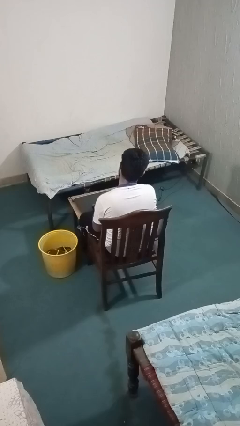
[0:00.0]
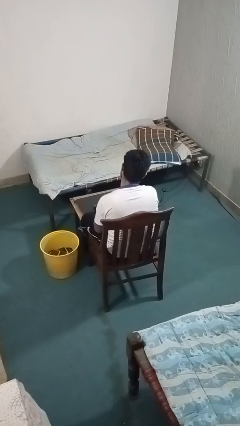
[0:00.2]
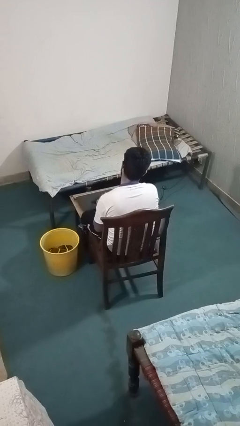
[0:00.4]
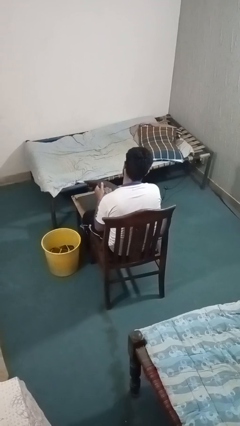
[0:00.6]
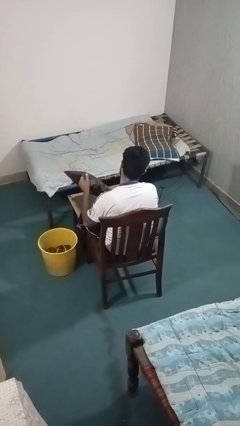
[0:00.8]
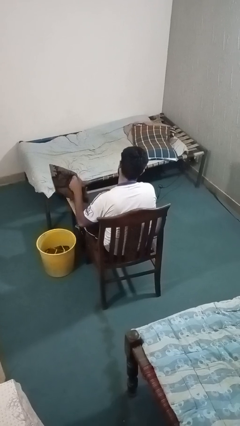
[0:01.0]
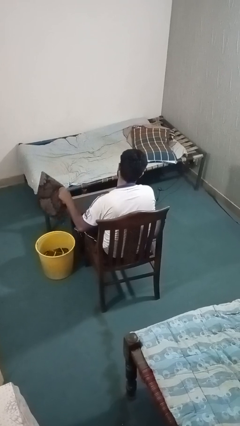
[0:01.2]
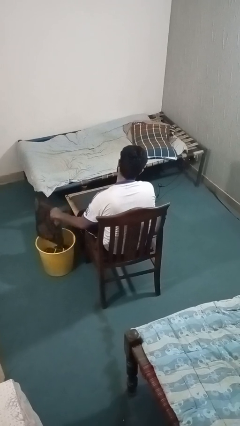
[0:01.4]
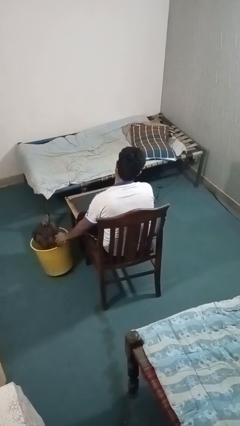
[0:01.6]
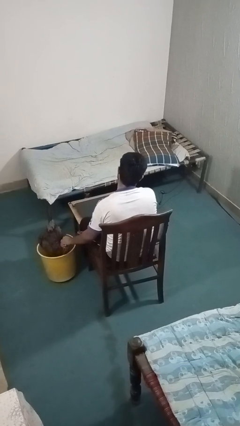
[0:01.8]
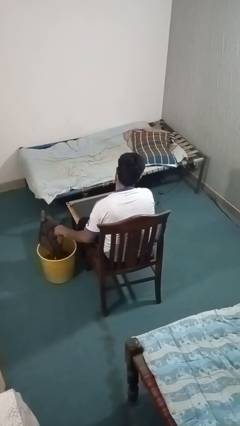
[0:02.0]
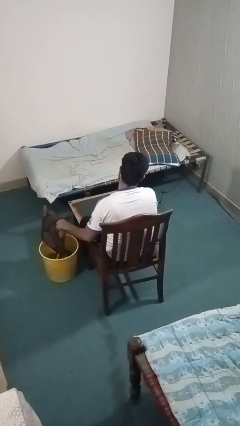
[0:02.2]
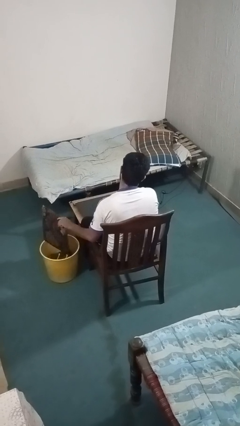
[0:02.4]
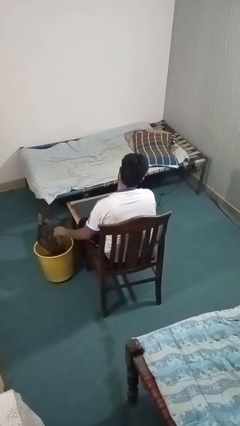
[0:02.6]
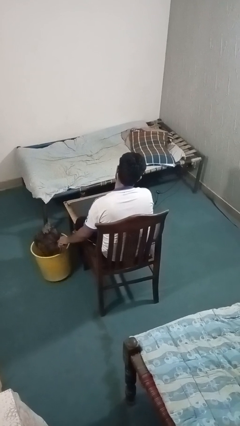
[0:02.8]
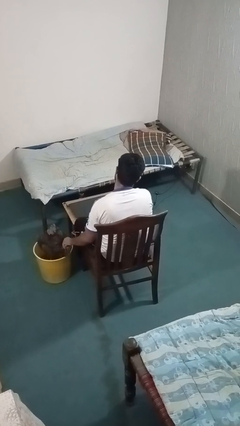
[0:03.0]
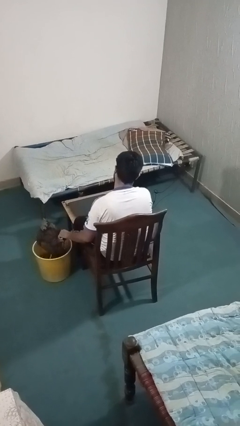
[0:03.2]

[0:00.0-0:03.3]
person puts object into basket

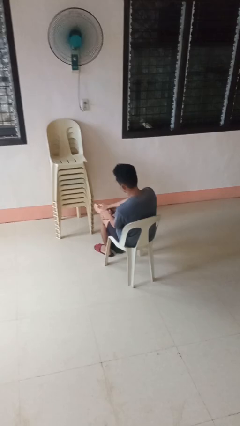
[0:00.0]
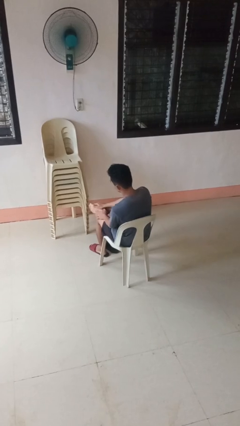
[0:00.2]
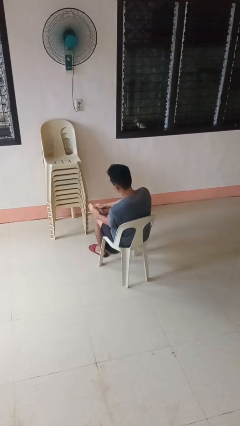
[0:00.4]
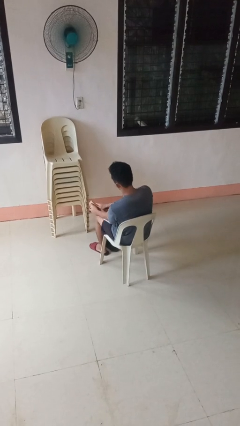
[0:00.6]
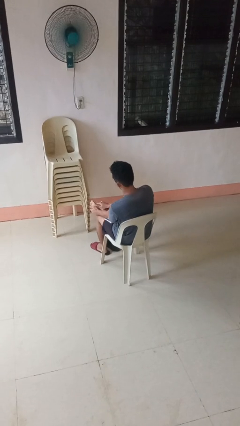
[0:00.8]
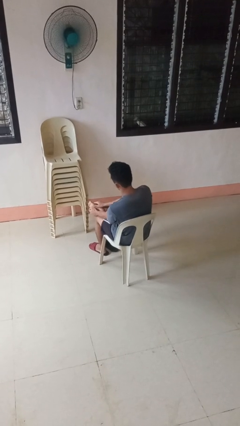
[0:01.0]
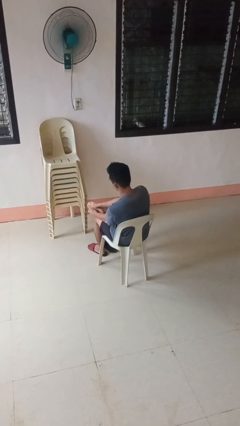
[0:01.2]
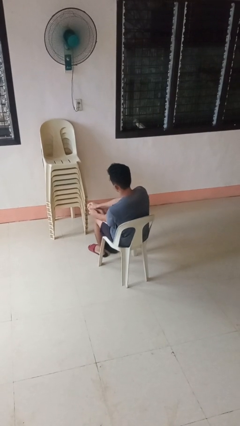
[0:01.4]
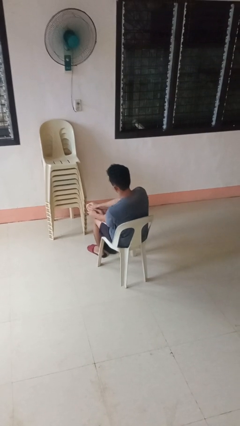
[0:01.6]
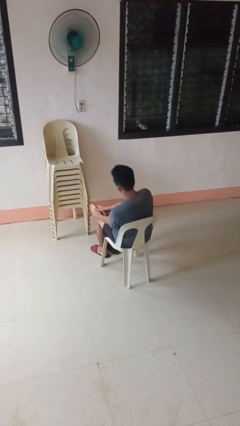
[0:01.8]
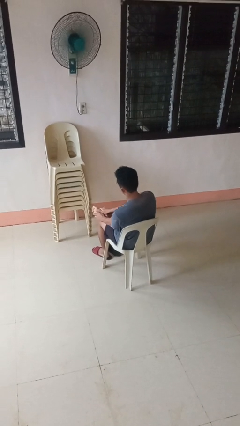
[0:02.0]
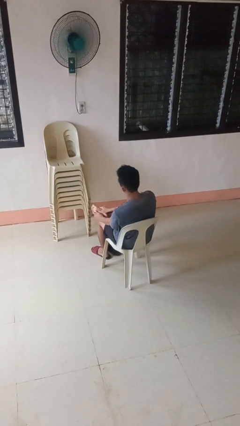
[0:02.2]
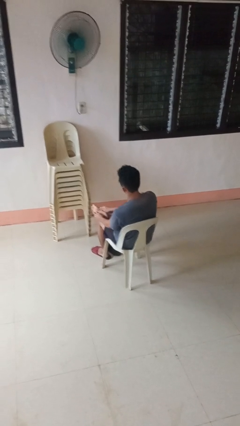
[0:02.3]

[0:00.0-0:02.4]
person rubs foot

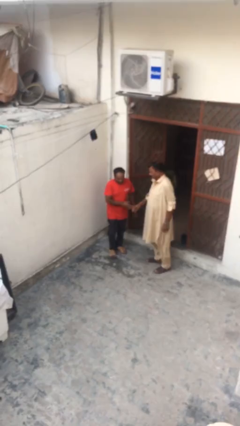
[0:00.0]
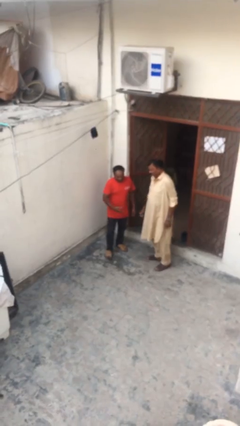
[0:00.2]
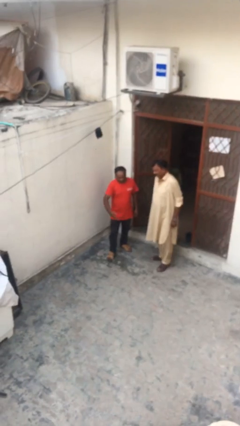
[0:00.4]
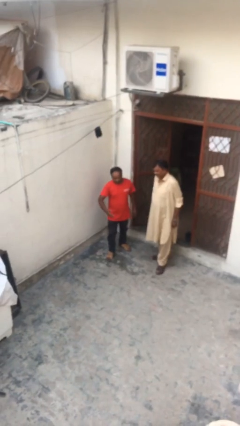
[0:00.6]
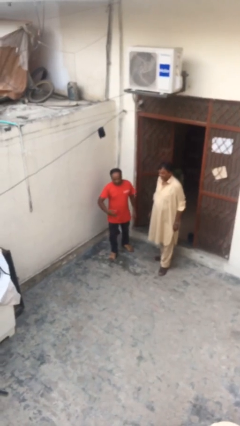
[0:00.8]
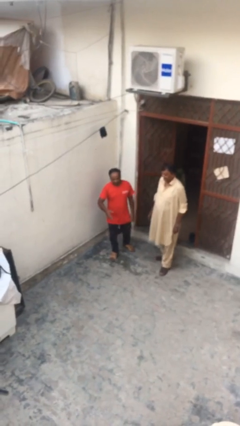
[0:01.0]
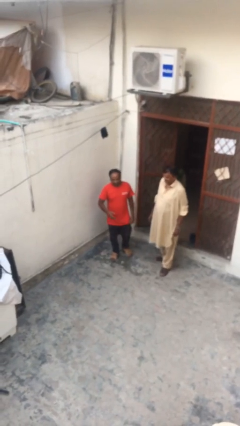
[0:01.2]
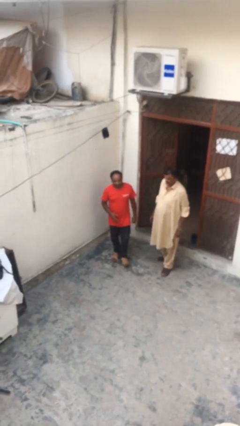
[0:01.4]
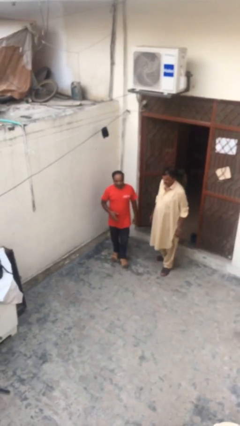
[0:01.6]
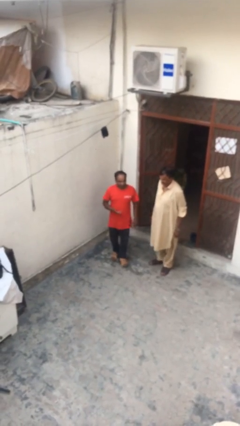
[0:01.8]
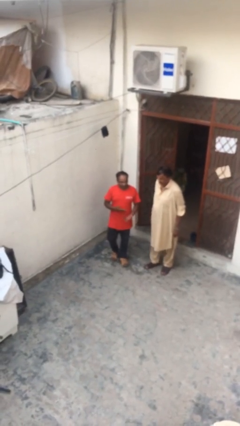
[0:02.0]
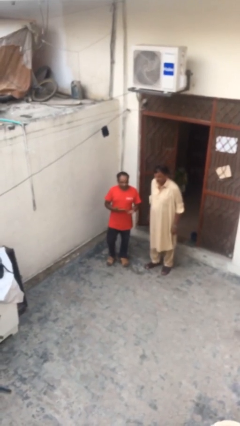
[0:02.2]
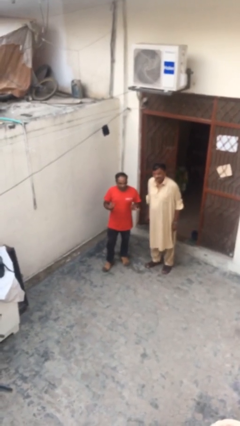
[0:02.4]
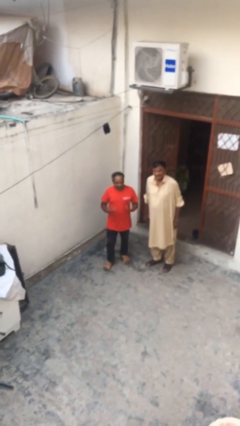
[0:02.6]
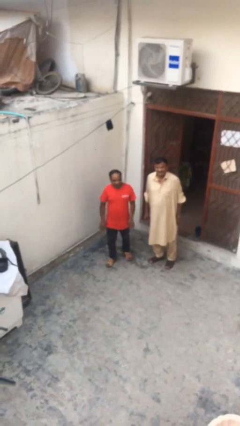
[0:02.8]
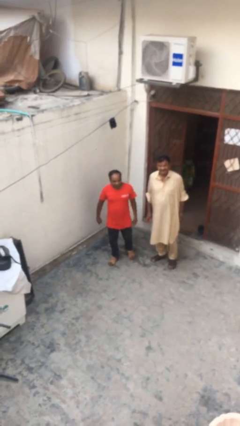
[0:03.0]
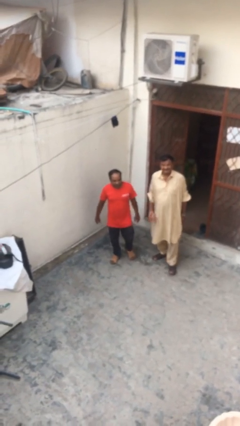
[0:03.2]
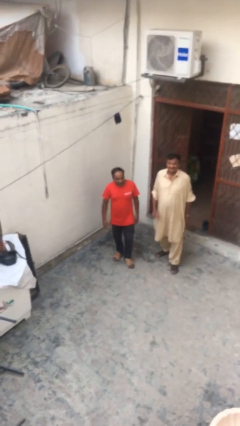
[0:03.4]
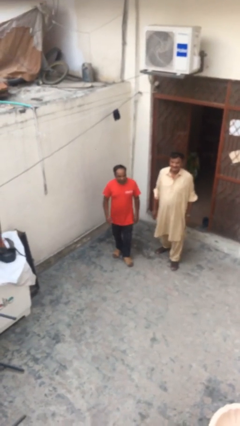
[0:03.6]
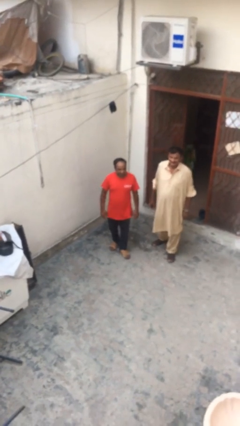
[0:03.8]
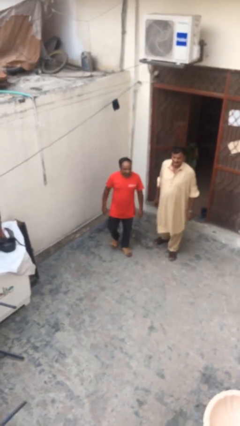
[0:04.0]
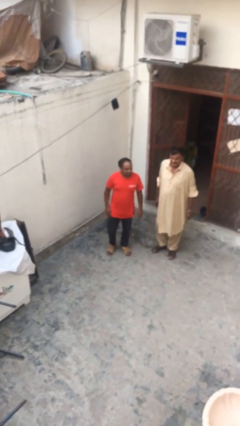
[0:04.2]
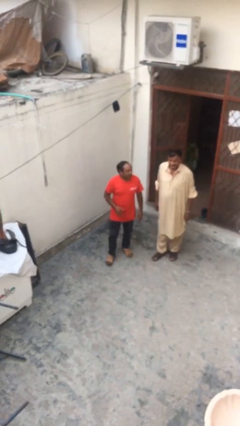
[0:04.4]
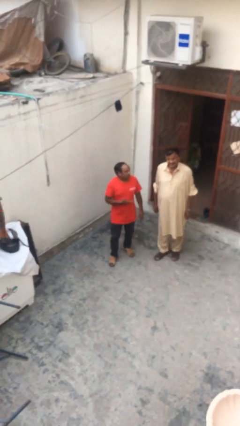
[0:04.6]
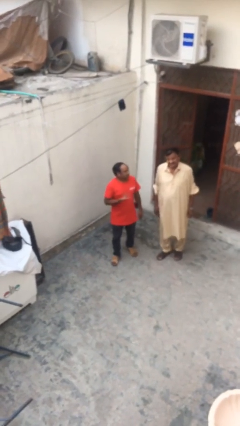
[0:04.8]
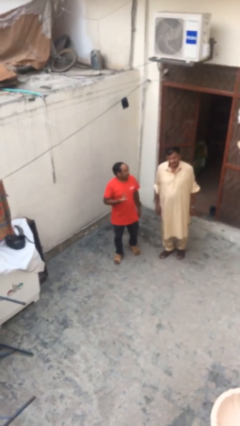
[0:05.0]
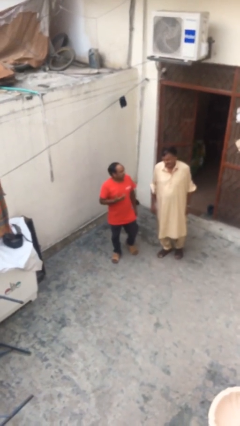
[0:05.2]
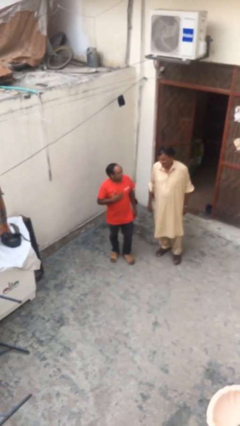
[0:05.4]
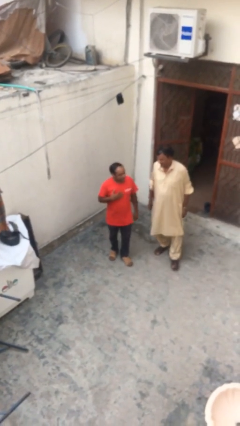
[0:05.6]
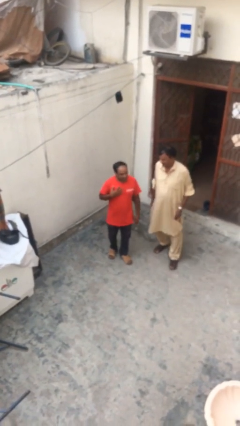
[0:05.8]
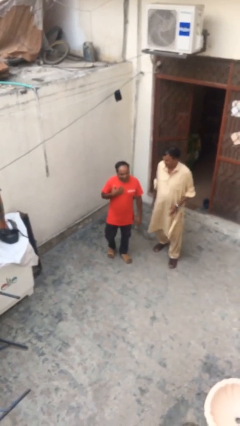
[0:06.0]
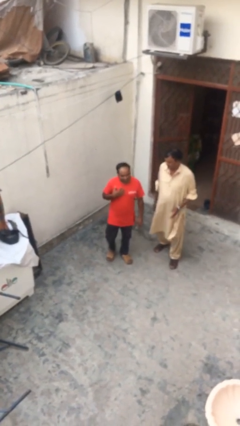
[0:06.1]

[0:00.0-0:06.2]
person talks to person

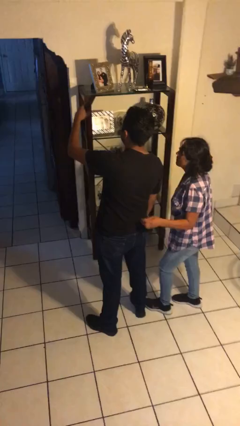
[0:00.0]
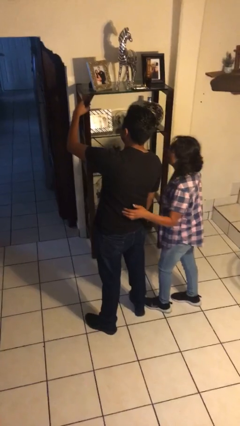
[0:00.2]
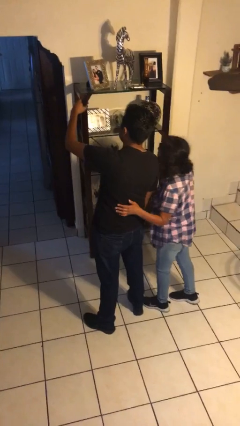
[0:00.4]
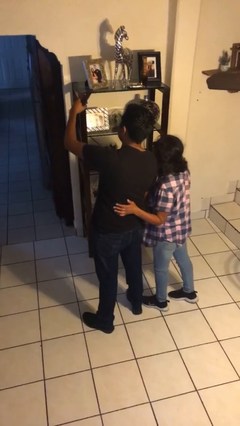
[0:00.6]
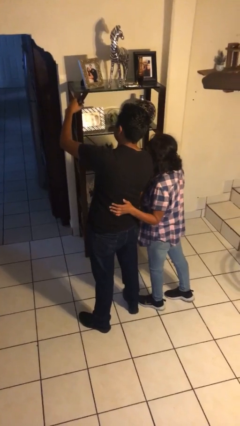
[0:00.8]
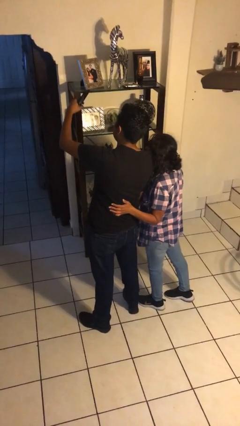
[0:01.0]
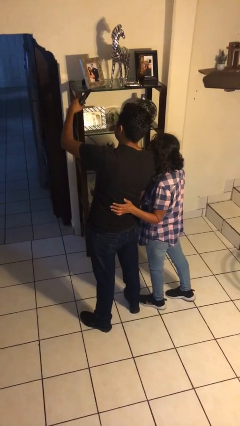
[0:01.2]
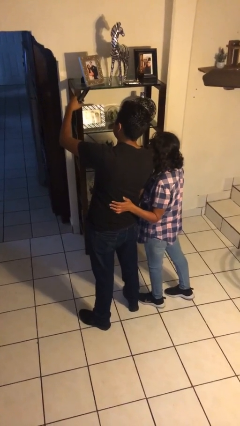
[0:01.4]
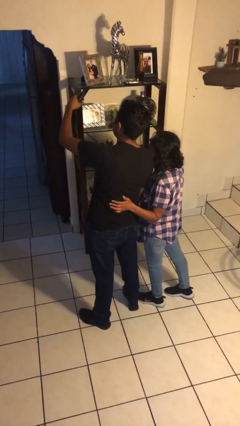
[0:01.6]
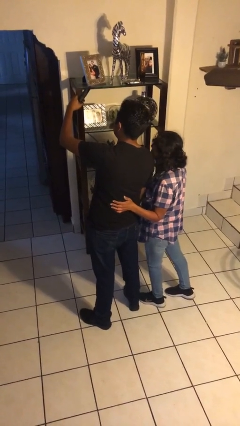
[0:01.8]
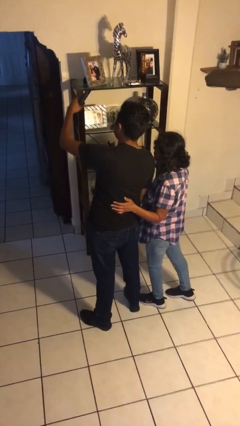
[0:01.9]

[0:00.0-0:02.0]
person takes selfie with person

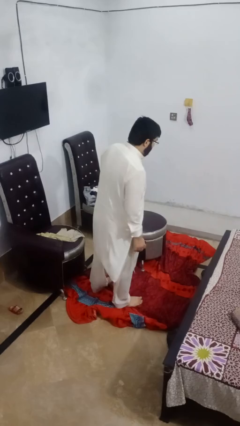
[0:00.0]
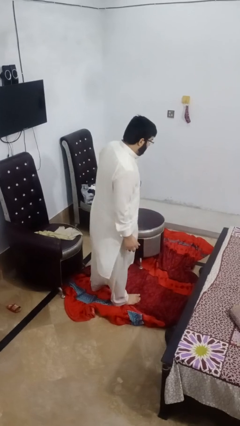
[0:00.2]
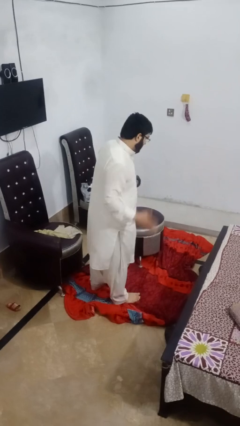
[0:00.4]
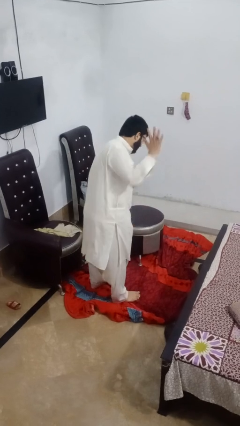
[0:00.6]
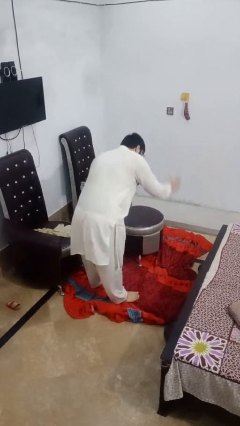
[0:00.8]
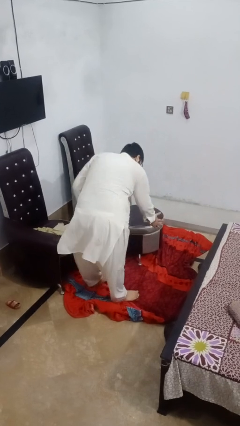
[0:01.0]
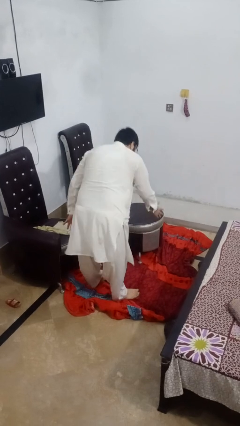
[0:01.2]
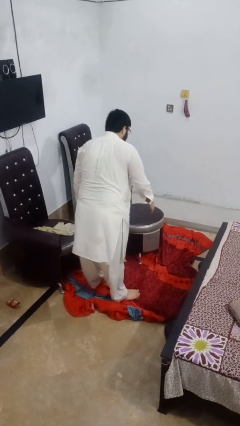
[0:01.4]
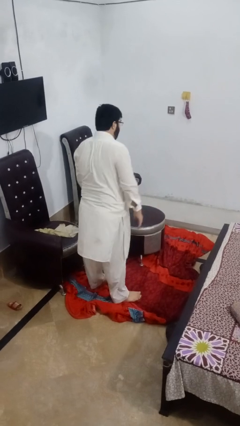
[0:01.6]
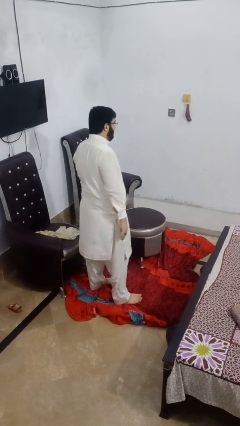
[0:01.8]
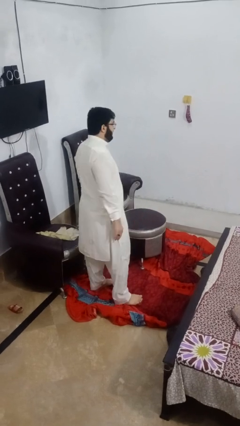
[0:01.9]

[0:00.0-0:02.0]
person karate chop

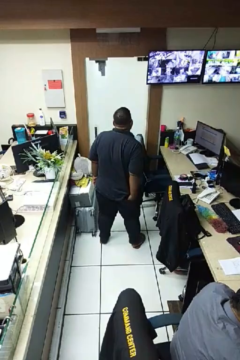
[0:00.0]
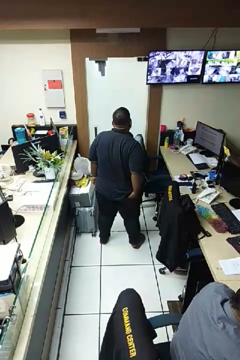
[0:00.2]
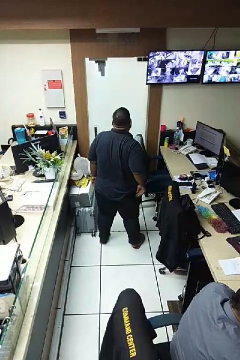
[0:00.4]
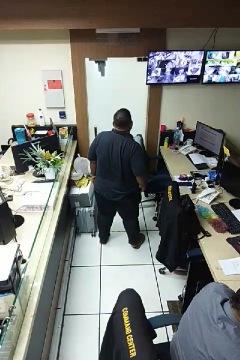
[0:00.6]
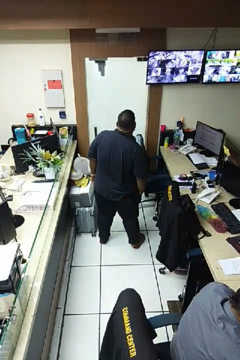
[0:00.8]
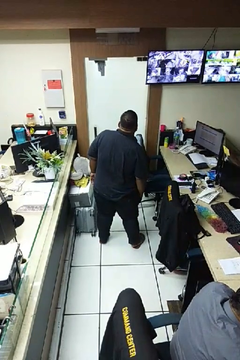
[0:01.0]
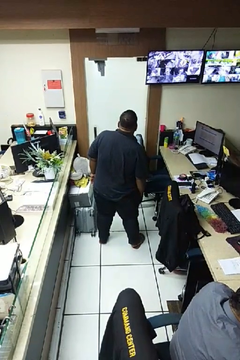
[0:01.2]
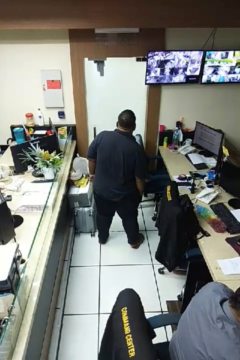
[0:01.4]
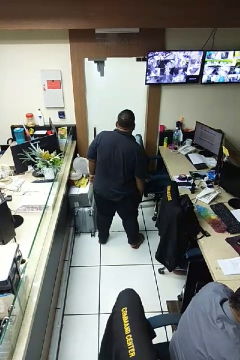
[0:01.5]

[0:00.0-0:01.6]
person puts hands in back pockets
